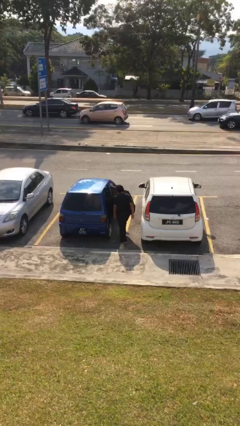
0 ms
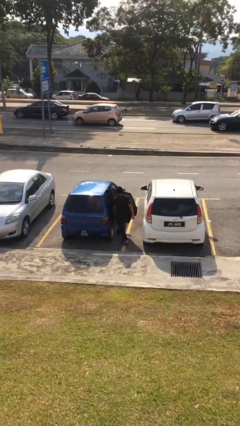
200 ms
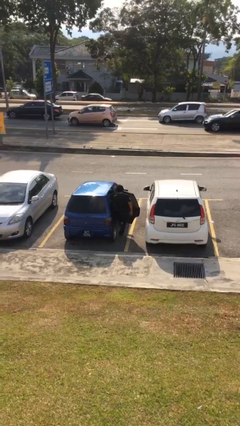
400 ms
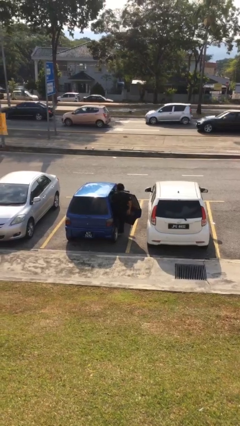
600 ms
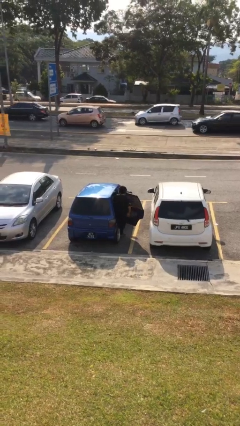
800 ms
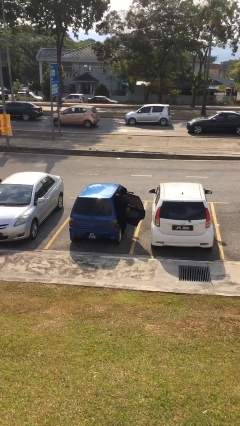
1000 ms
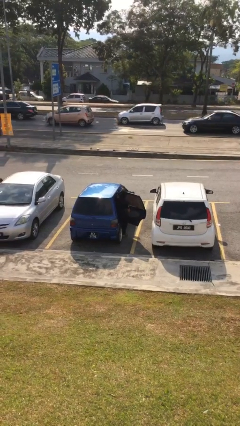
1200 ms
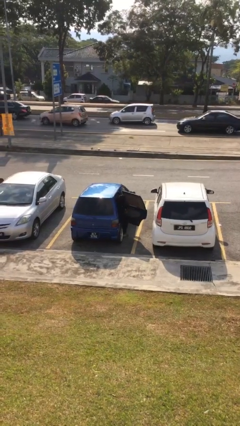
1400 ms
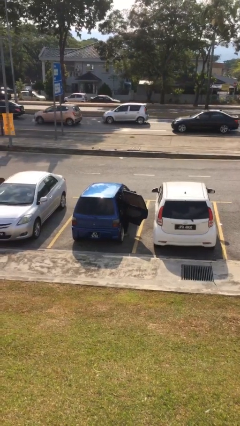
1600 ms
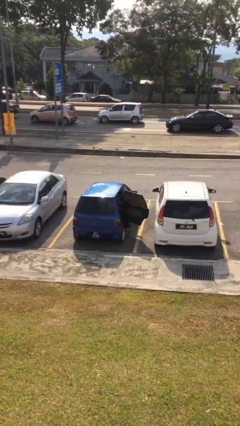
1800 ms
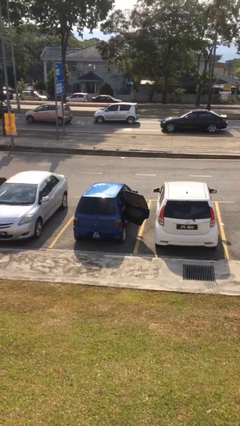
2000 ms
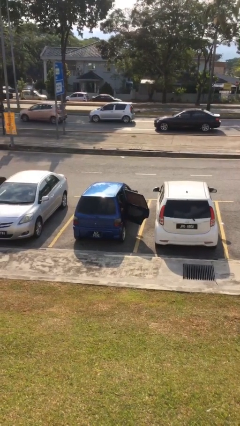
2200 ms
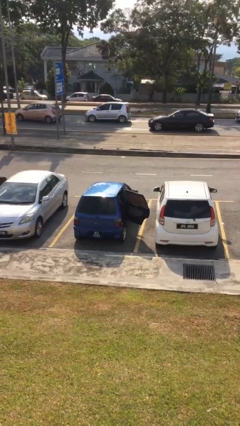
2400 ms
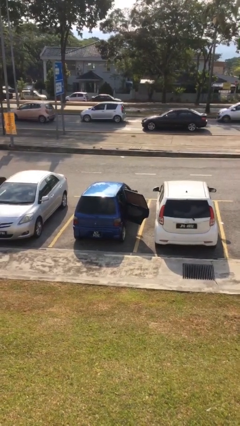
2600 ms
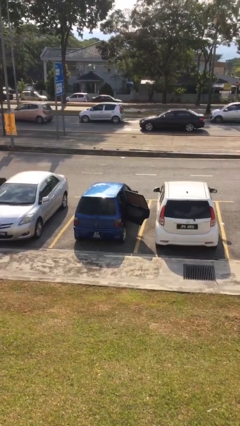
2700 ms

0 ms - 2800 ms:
person enters car

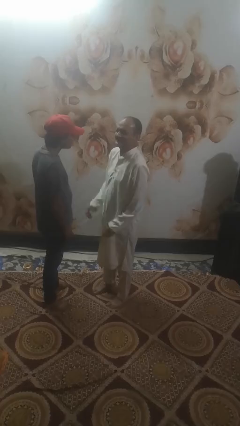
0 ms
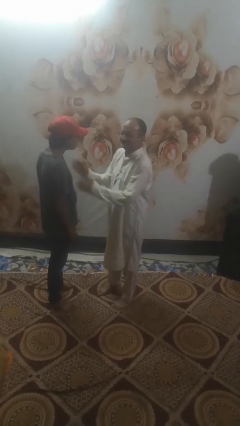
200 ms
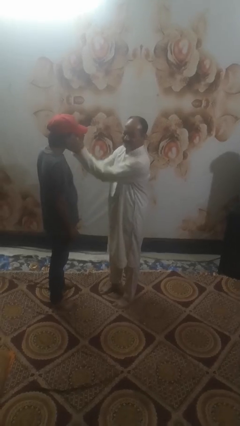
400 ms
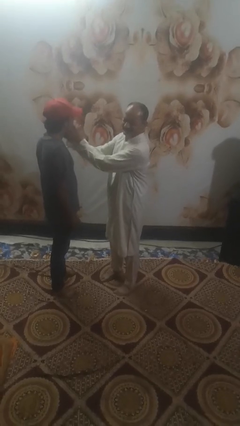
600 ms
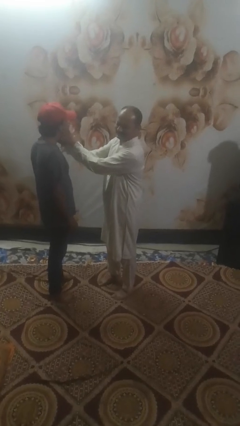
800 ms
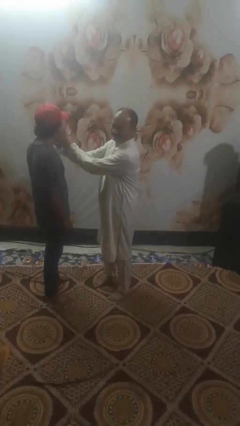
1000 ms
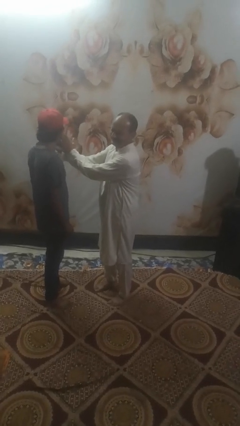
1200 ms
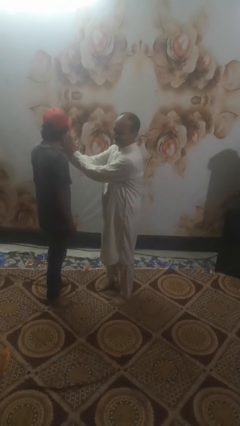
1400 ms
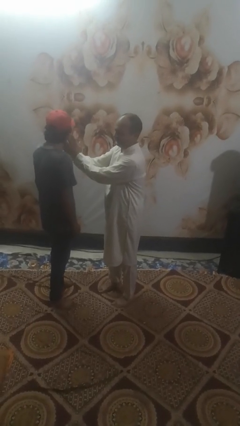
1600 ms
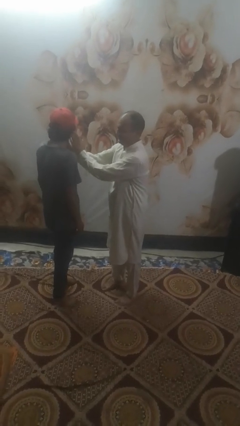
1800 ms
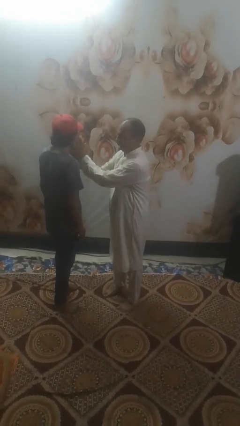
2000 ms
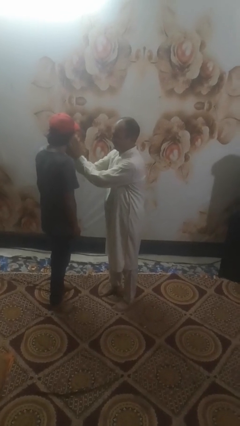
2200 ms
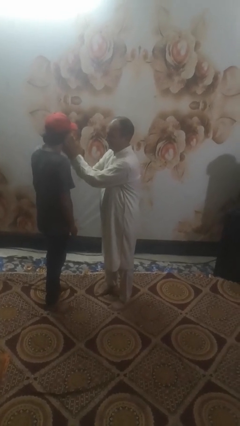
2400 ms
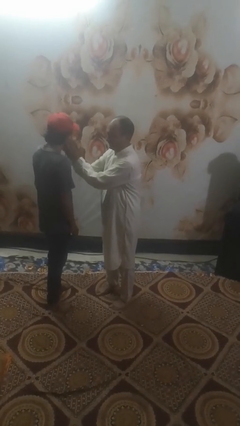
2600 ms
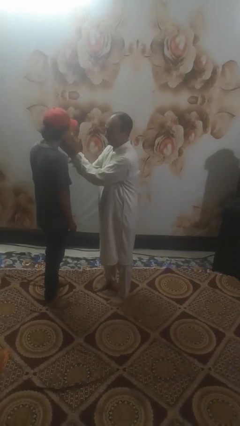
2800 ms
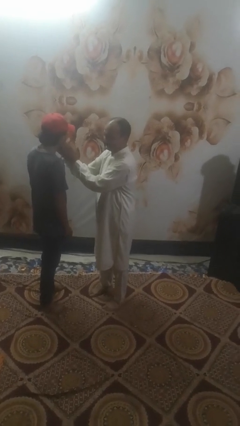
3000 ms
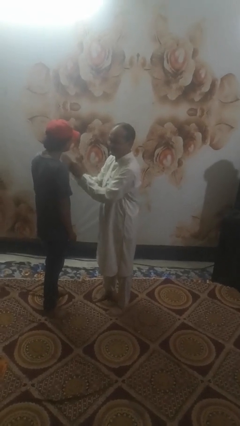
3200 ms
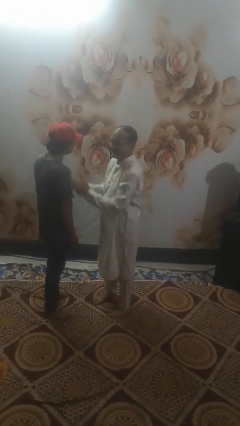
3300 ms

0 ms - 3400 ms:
person touches face of person

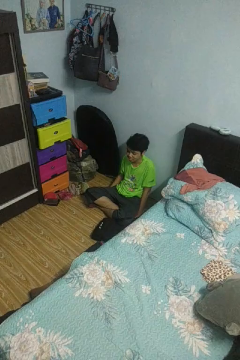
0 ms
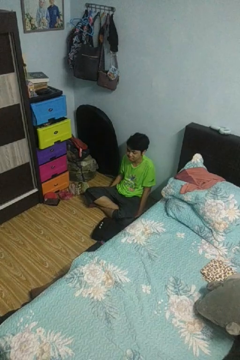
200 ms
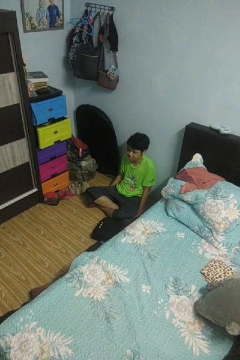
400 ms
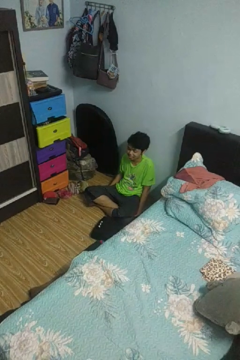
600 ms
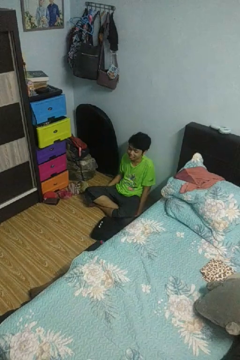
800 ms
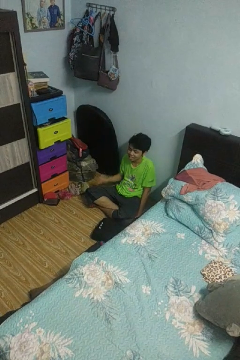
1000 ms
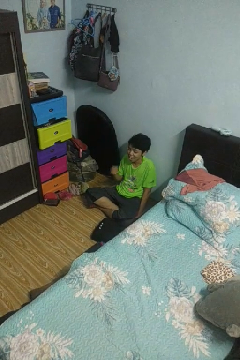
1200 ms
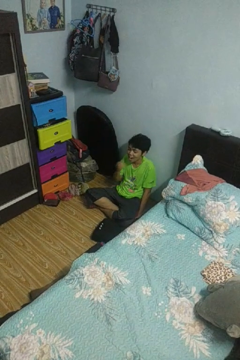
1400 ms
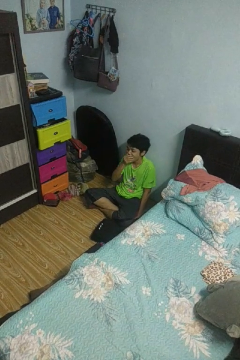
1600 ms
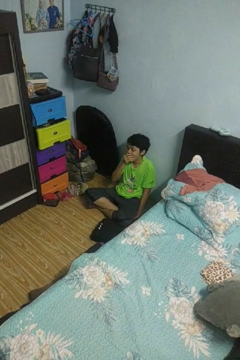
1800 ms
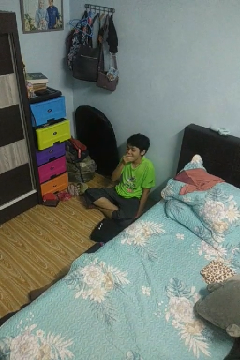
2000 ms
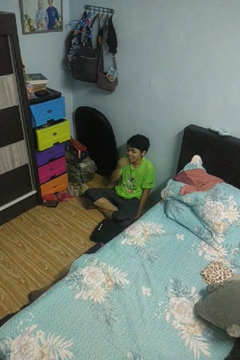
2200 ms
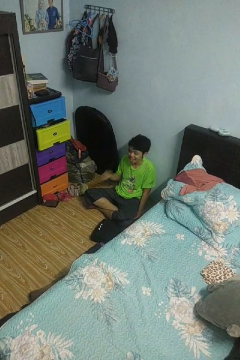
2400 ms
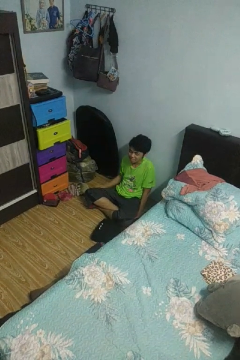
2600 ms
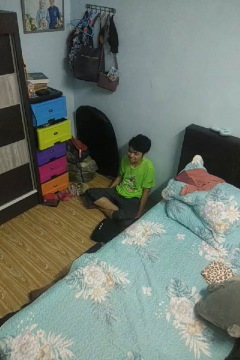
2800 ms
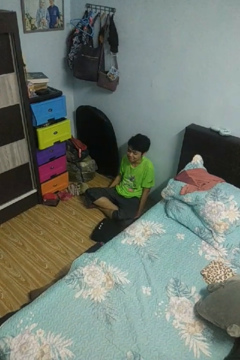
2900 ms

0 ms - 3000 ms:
person yawns

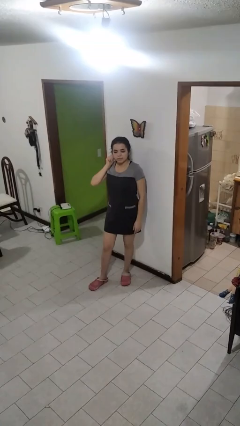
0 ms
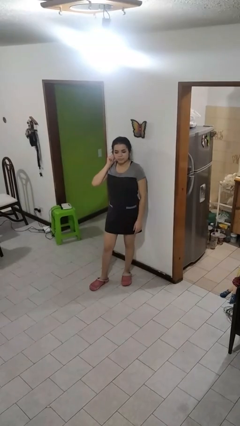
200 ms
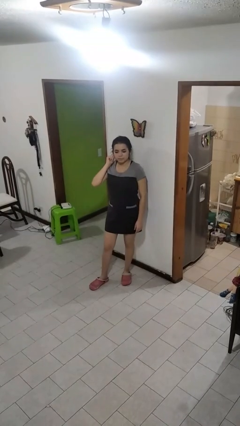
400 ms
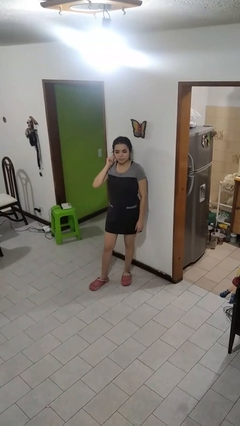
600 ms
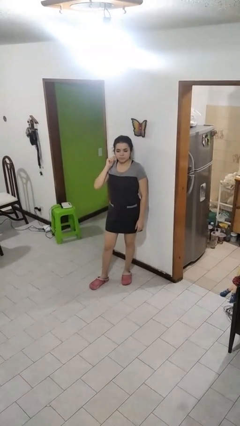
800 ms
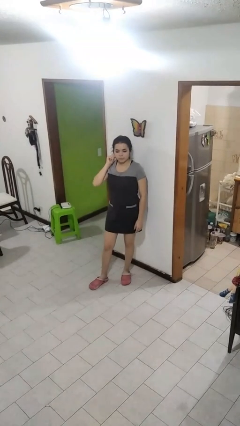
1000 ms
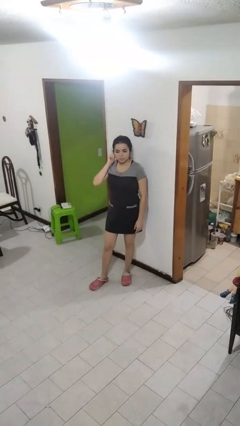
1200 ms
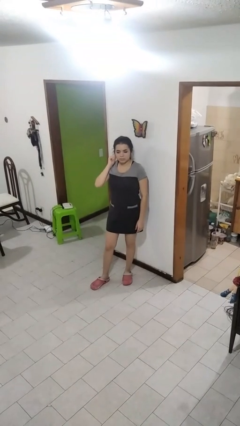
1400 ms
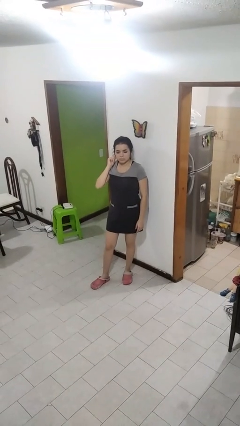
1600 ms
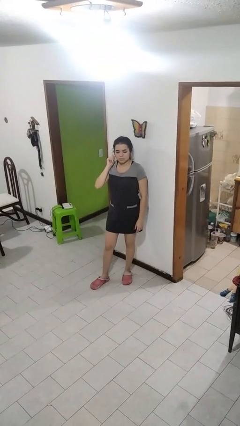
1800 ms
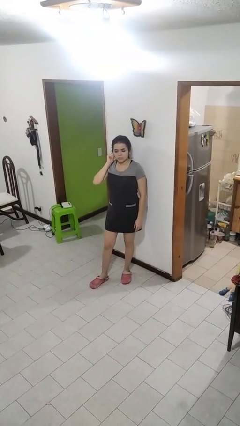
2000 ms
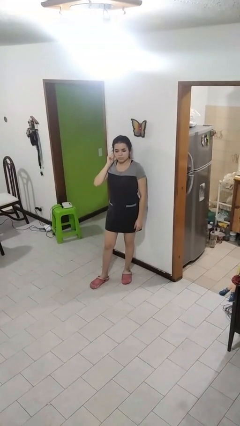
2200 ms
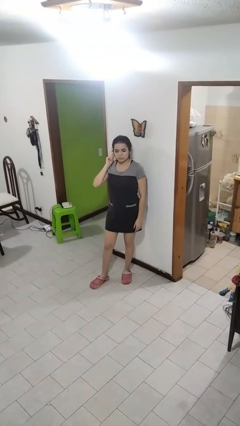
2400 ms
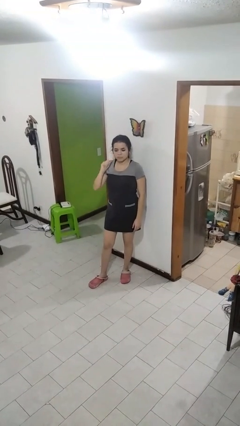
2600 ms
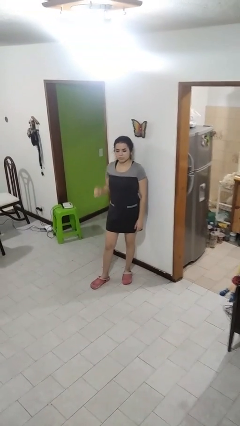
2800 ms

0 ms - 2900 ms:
person touches earlobe

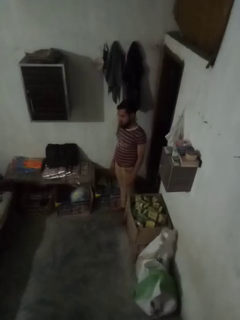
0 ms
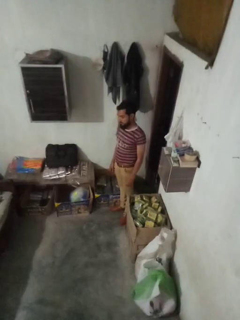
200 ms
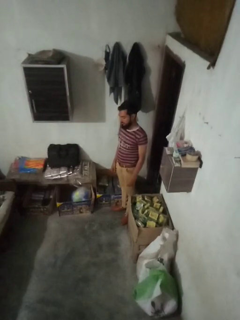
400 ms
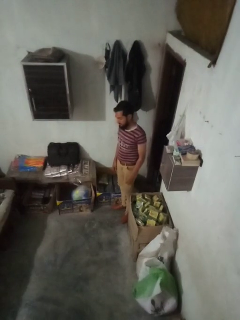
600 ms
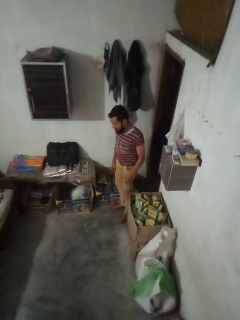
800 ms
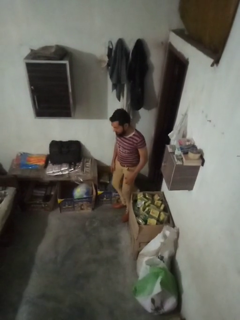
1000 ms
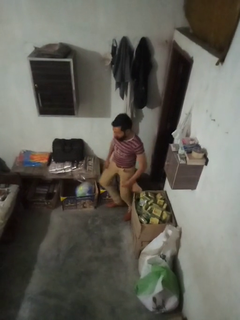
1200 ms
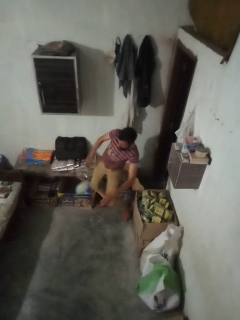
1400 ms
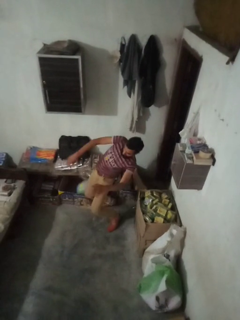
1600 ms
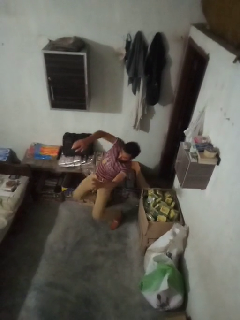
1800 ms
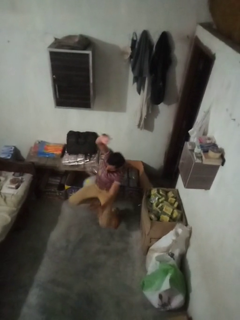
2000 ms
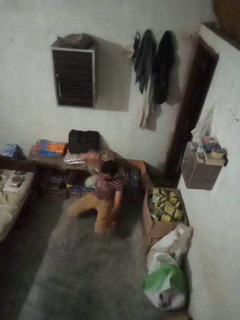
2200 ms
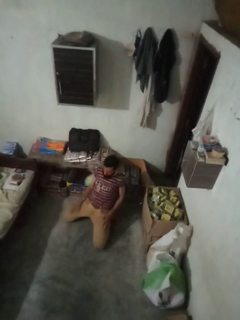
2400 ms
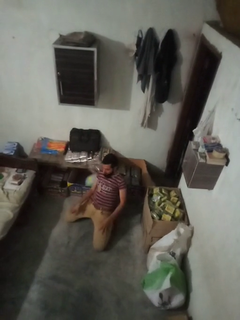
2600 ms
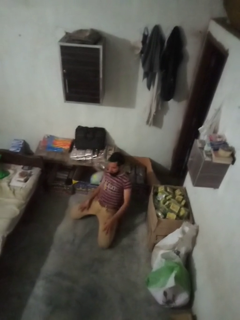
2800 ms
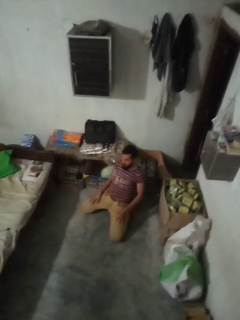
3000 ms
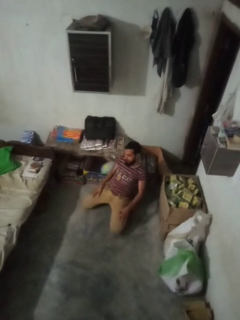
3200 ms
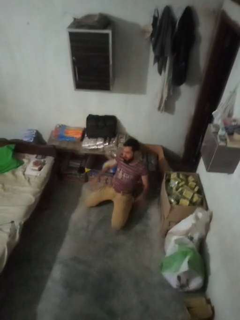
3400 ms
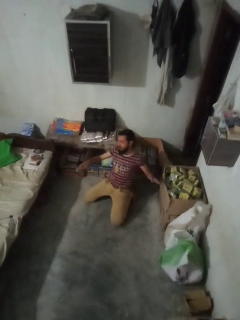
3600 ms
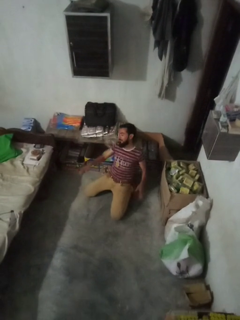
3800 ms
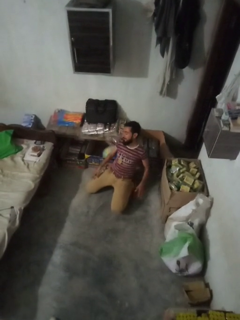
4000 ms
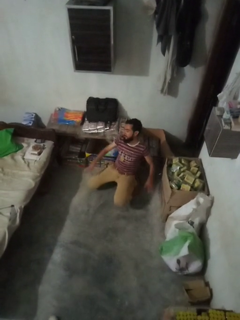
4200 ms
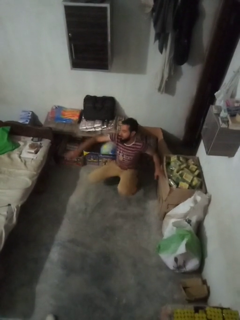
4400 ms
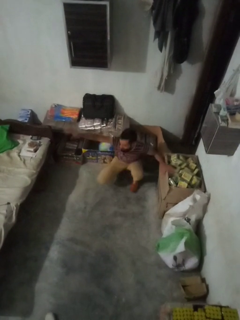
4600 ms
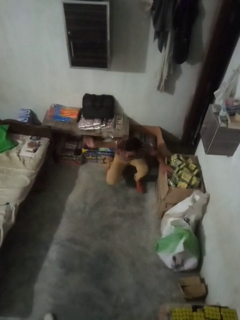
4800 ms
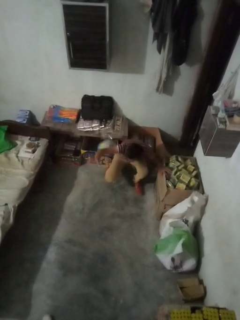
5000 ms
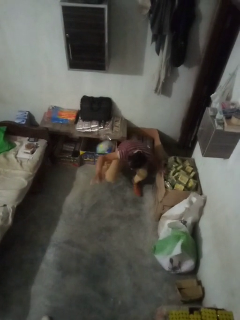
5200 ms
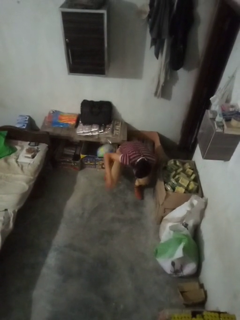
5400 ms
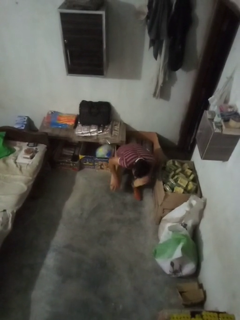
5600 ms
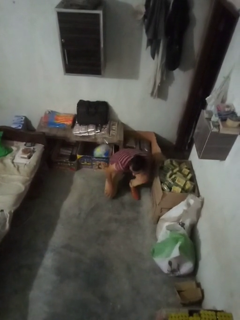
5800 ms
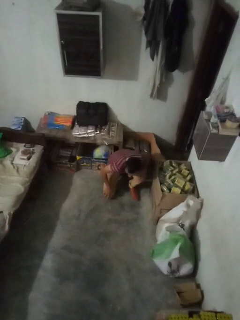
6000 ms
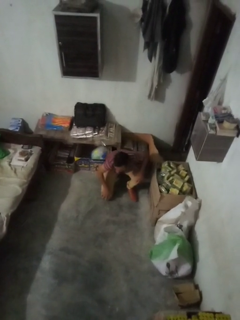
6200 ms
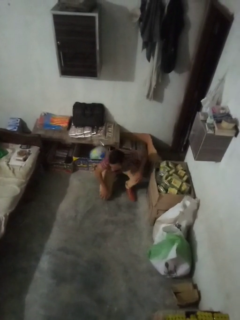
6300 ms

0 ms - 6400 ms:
person trips on object on floor

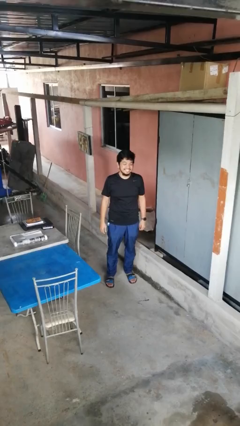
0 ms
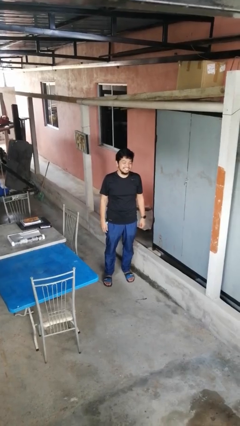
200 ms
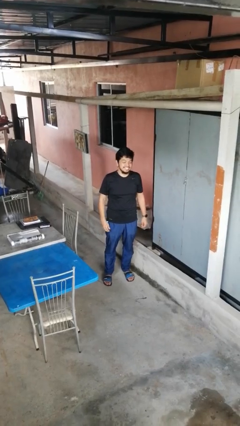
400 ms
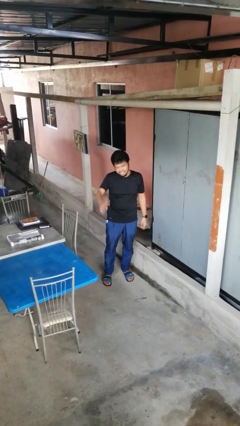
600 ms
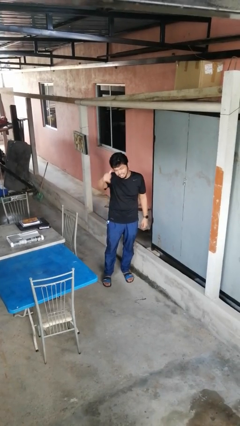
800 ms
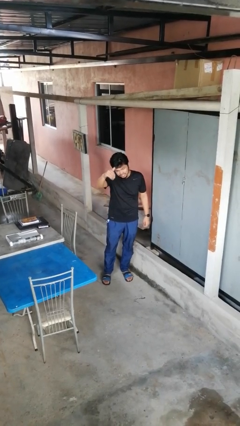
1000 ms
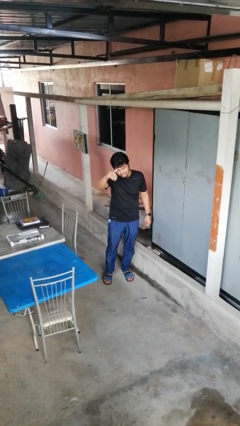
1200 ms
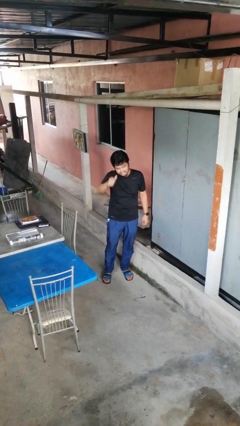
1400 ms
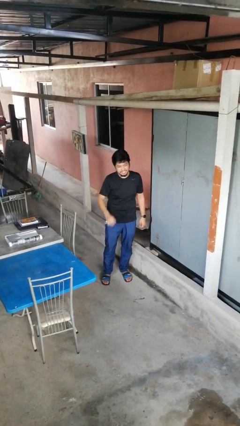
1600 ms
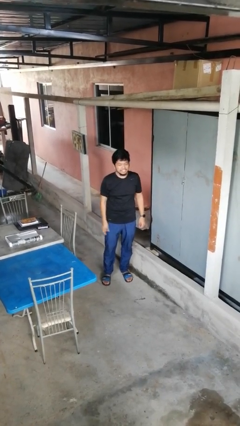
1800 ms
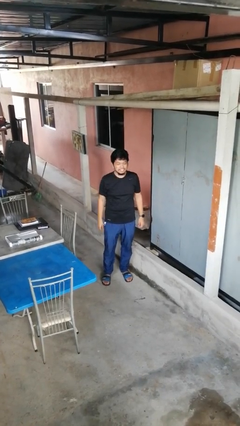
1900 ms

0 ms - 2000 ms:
person gestures come here
